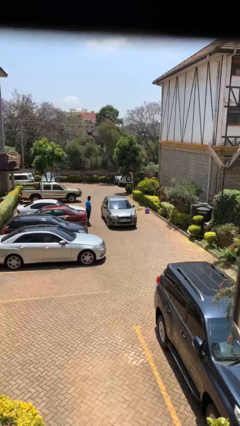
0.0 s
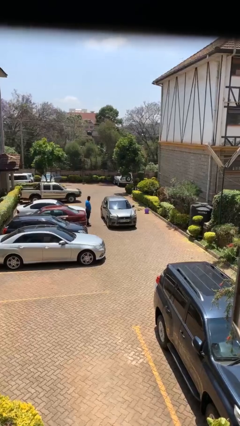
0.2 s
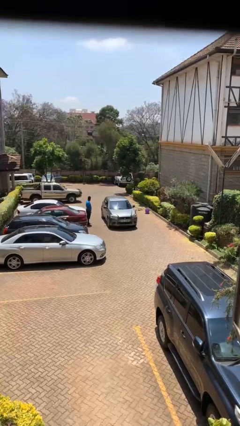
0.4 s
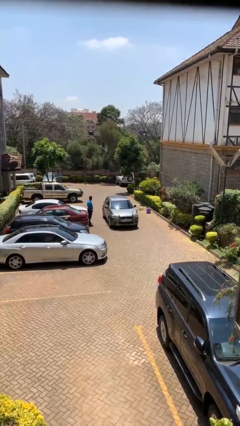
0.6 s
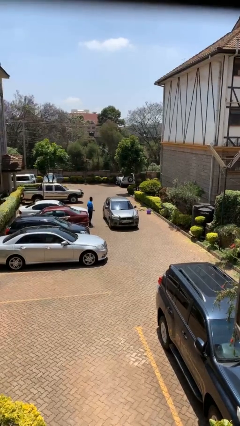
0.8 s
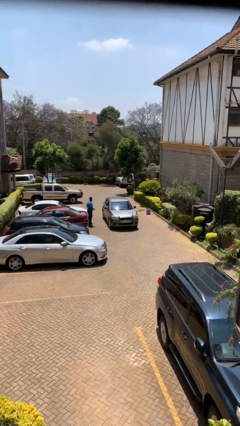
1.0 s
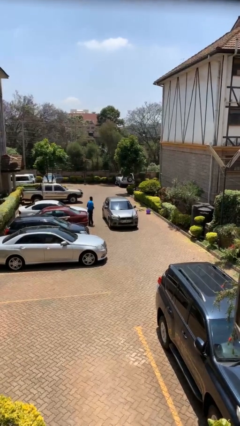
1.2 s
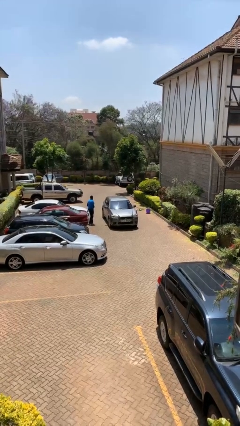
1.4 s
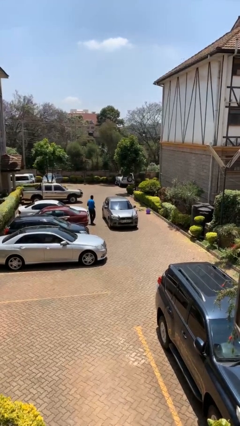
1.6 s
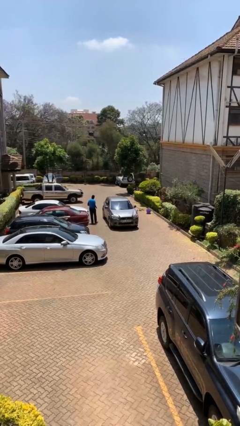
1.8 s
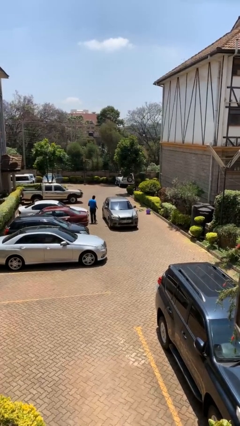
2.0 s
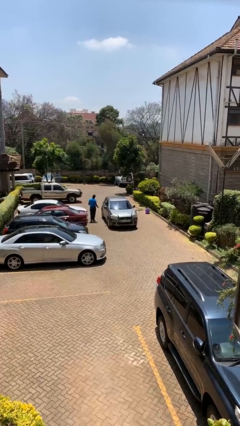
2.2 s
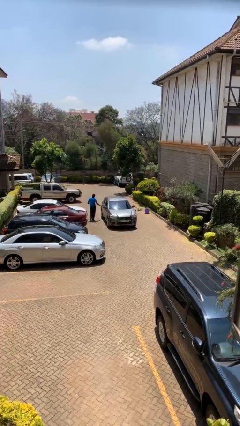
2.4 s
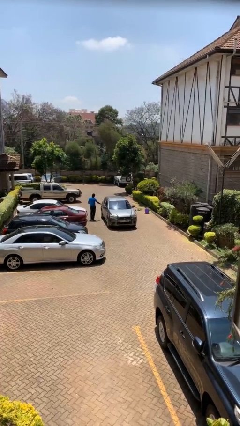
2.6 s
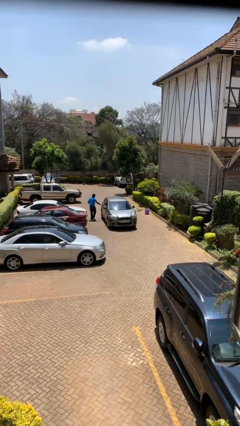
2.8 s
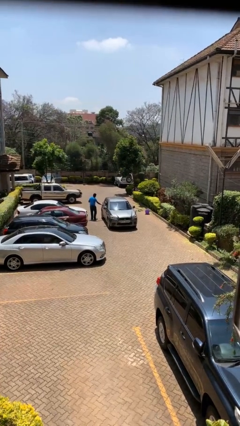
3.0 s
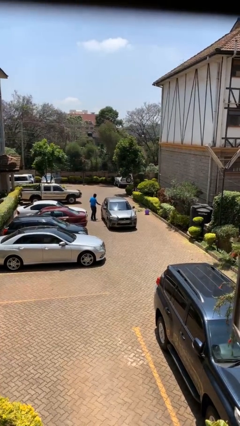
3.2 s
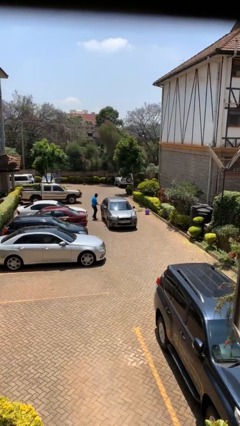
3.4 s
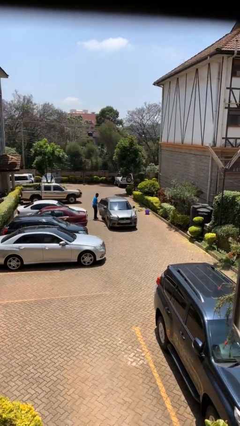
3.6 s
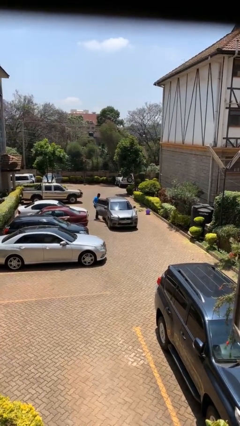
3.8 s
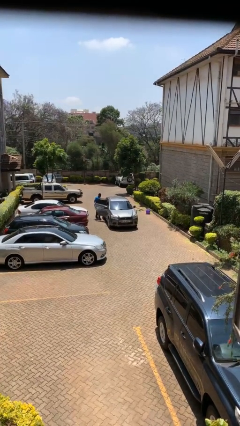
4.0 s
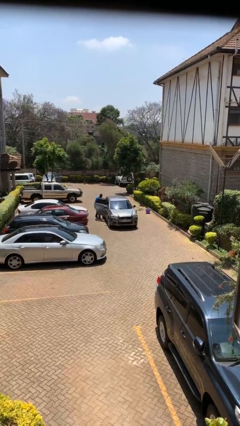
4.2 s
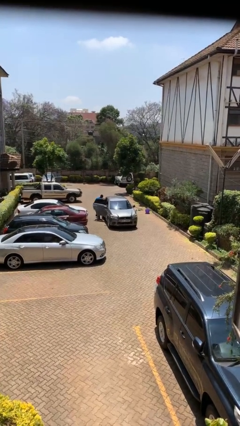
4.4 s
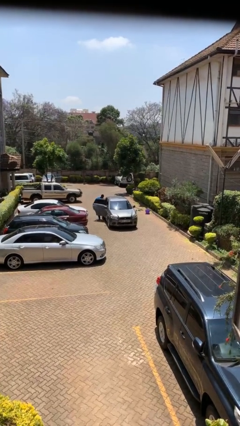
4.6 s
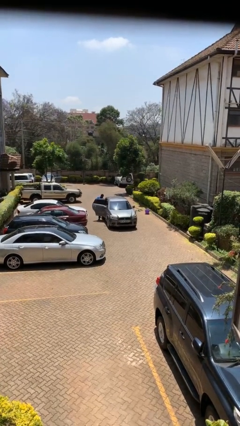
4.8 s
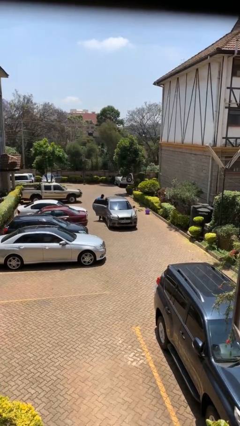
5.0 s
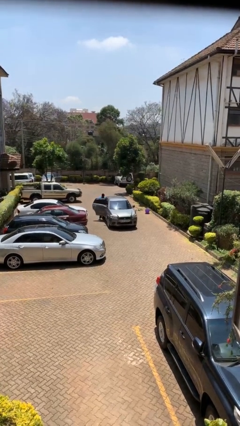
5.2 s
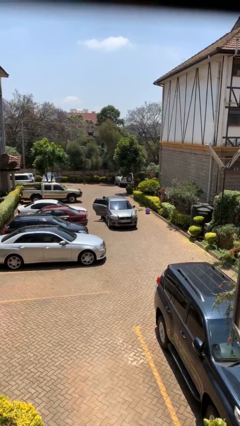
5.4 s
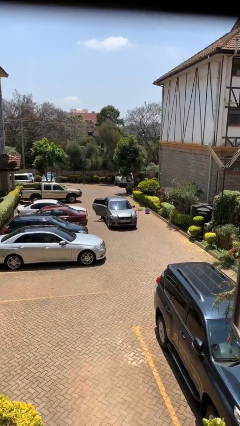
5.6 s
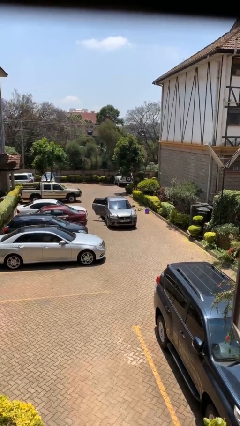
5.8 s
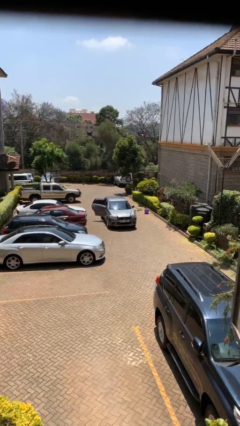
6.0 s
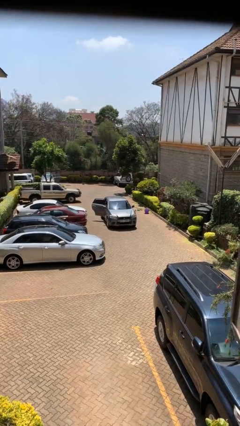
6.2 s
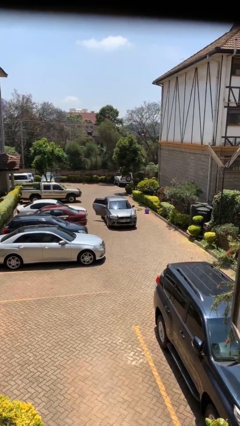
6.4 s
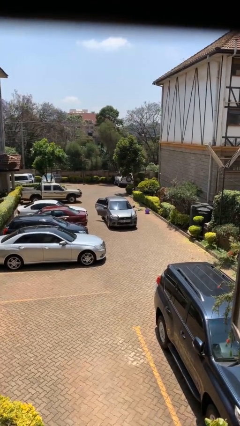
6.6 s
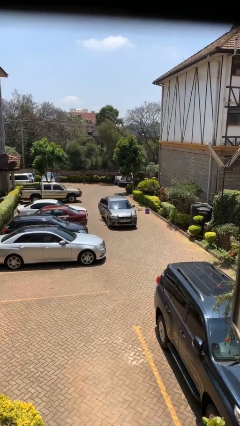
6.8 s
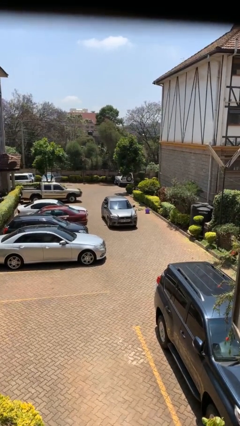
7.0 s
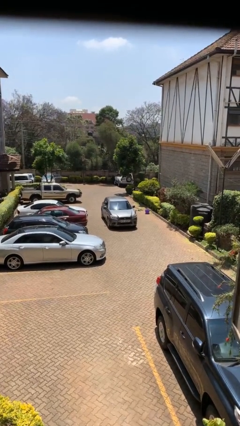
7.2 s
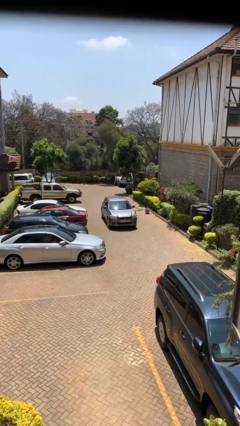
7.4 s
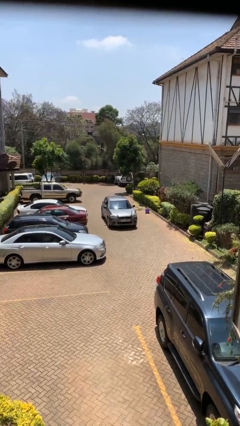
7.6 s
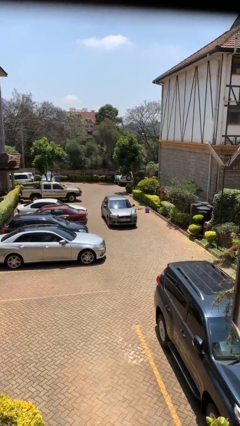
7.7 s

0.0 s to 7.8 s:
car picks up person

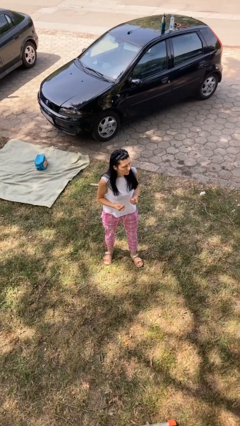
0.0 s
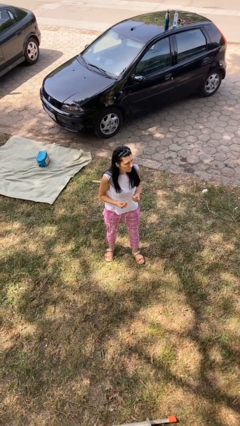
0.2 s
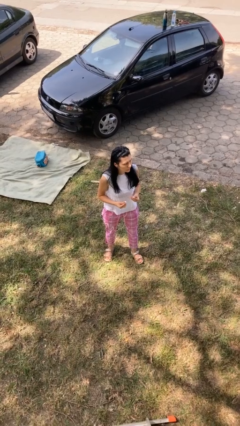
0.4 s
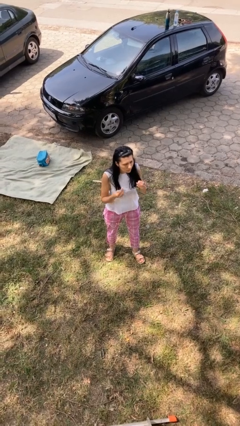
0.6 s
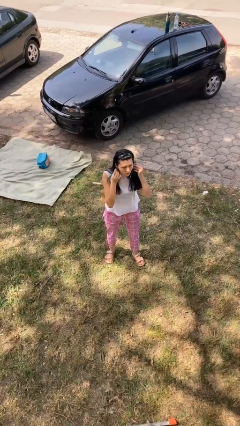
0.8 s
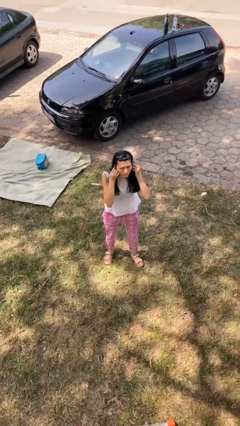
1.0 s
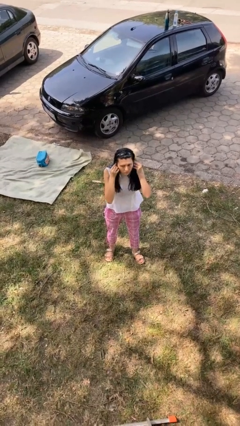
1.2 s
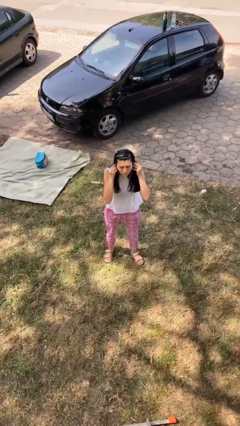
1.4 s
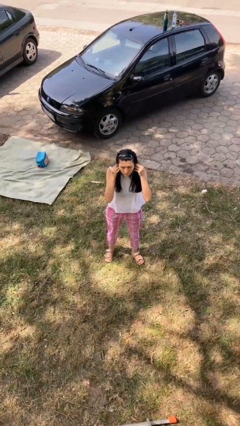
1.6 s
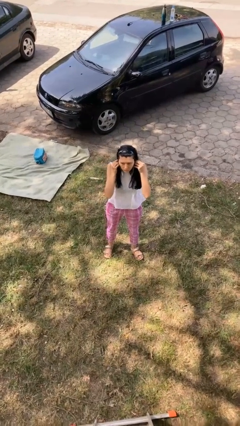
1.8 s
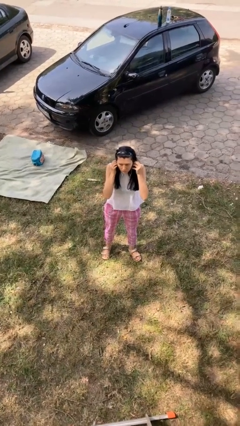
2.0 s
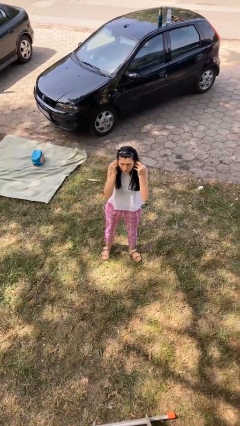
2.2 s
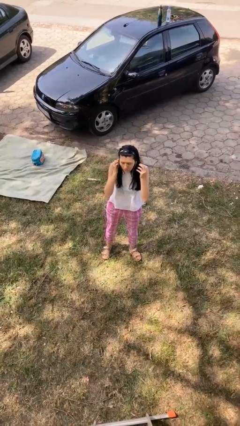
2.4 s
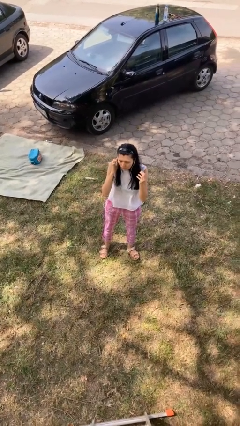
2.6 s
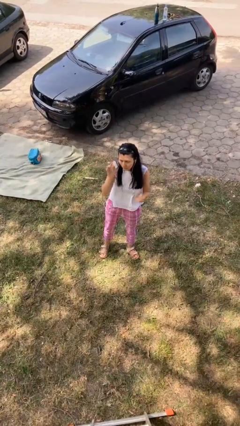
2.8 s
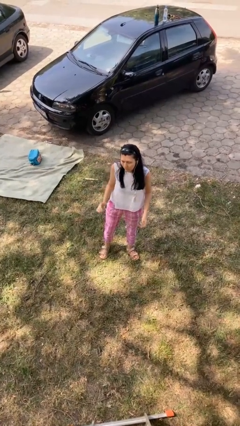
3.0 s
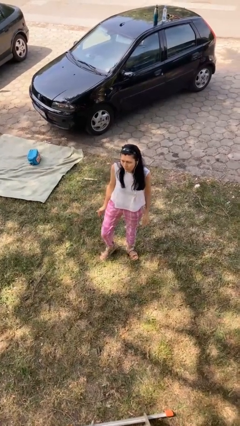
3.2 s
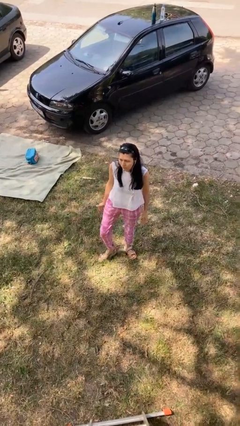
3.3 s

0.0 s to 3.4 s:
person puts on headphones

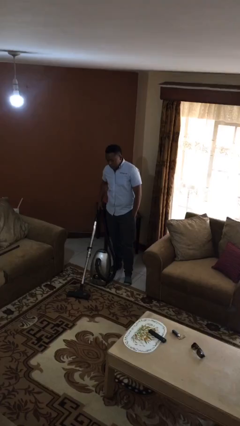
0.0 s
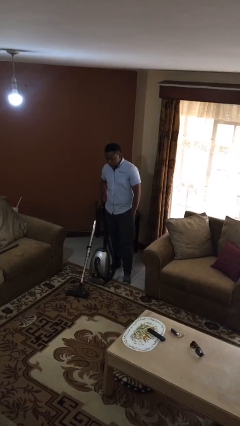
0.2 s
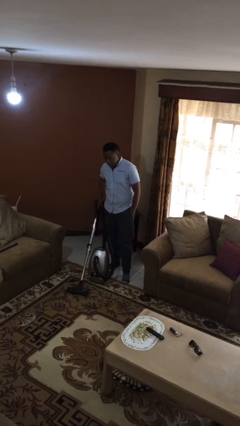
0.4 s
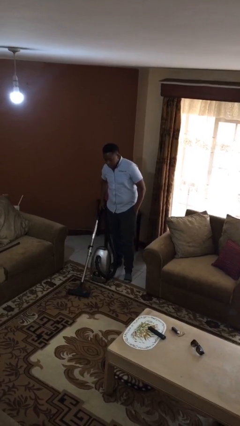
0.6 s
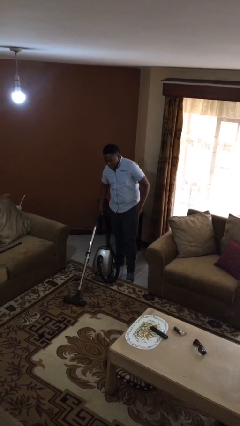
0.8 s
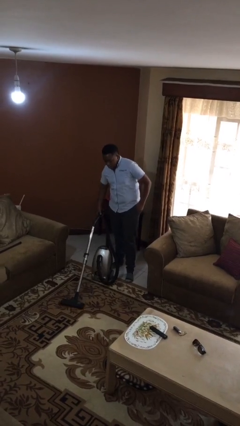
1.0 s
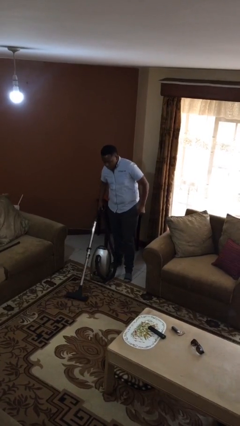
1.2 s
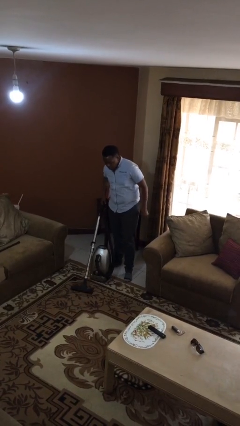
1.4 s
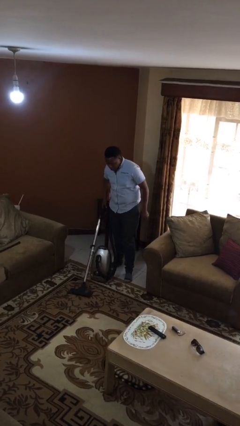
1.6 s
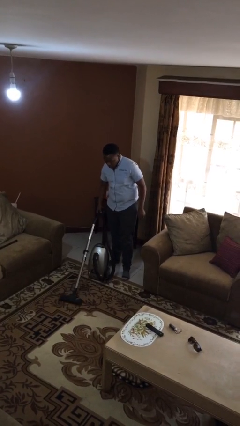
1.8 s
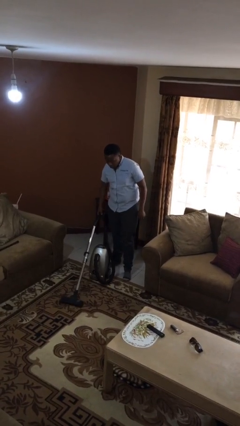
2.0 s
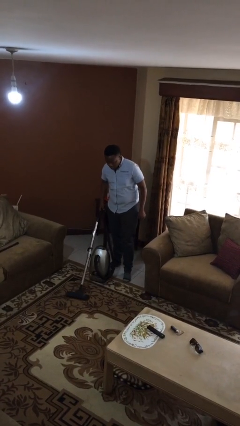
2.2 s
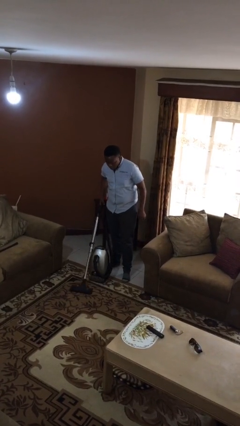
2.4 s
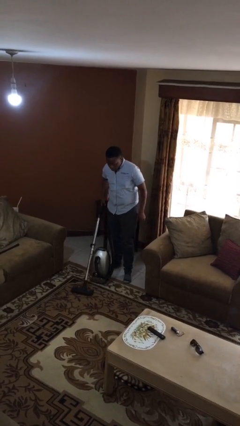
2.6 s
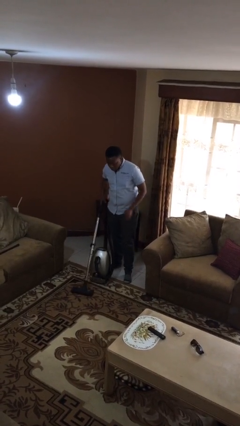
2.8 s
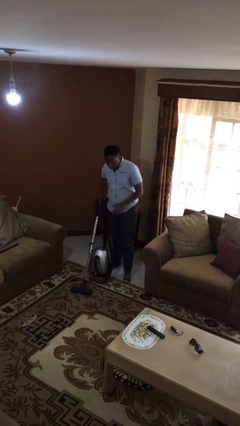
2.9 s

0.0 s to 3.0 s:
person vacuums carpet

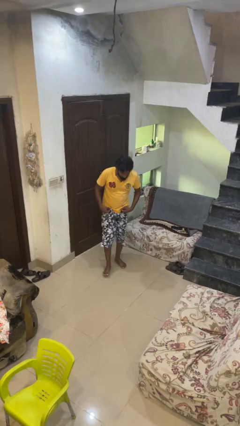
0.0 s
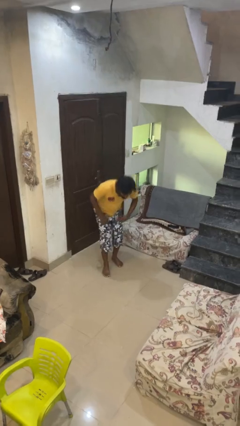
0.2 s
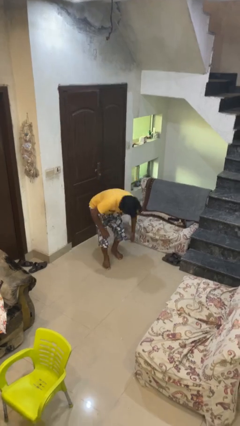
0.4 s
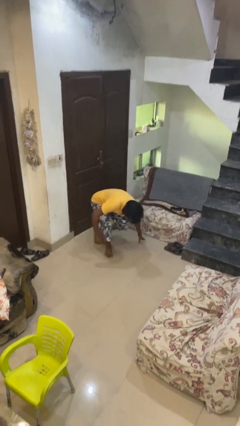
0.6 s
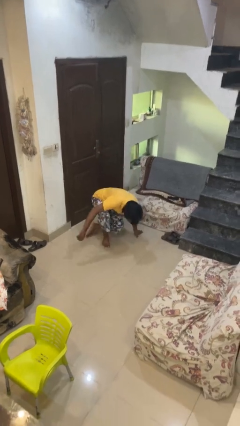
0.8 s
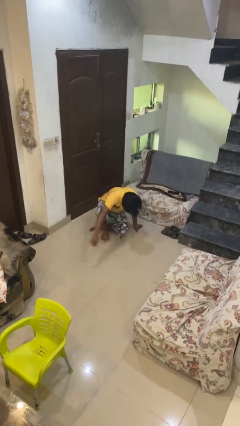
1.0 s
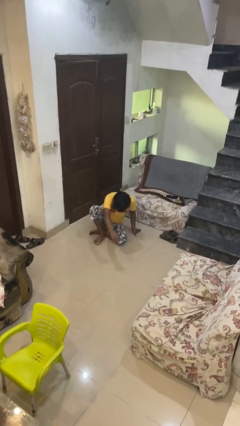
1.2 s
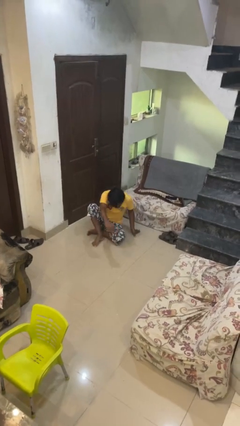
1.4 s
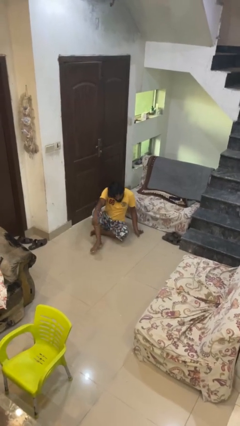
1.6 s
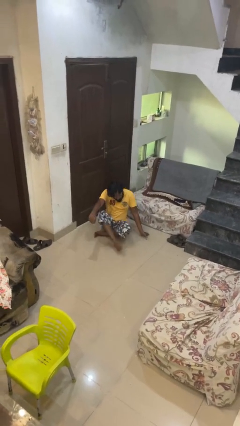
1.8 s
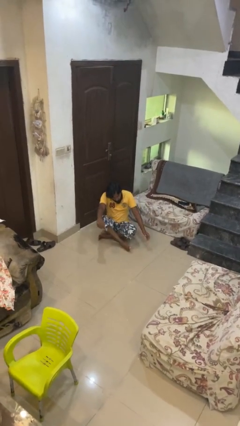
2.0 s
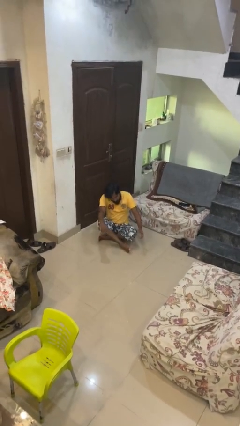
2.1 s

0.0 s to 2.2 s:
person sits crisscross

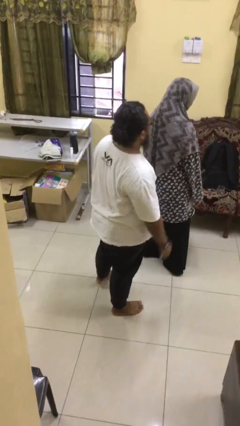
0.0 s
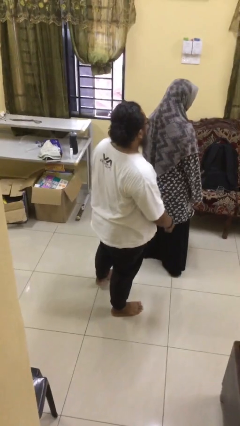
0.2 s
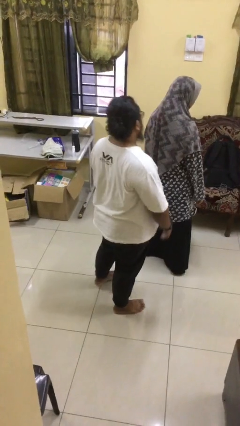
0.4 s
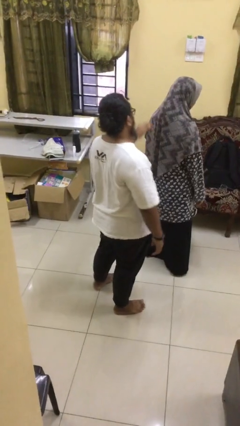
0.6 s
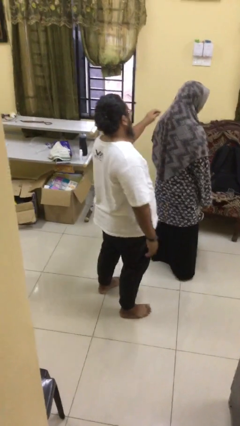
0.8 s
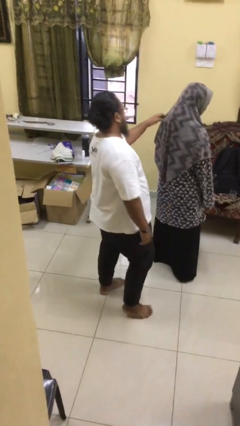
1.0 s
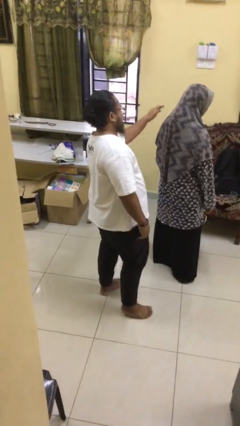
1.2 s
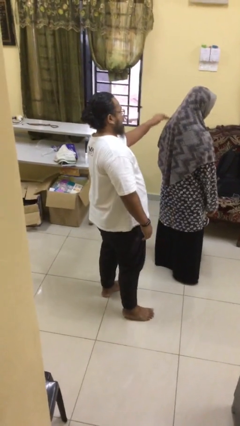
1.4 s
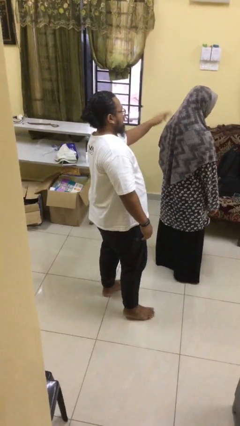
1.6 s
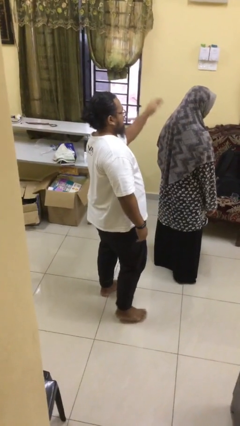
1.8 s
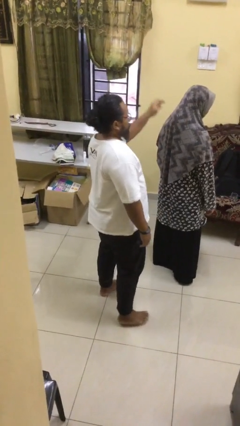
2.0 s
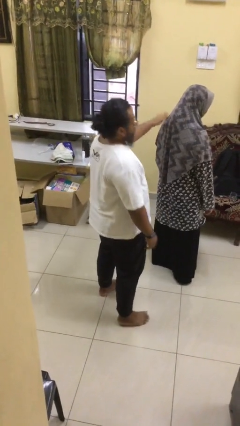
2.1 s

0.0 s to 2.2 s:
person touches back of person
